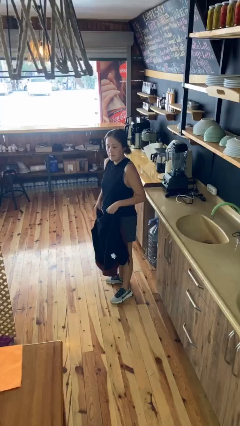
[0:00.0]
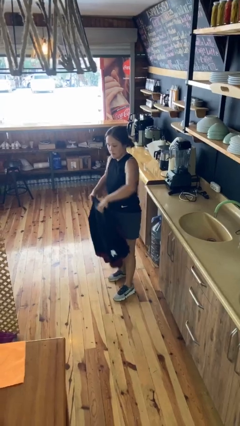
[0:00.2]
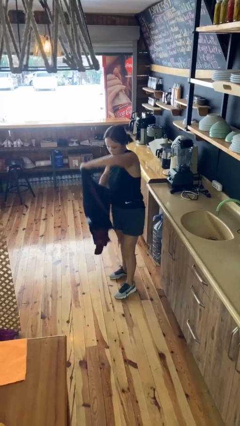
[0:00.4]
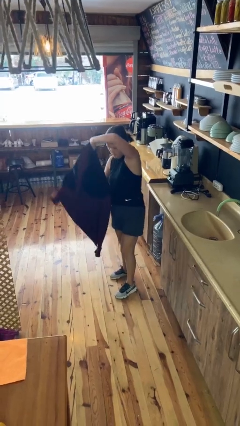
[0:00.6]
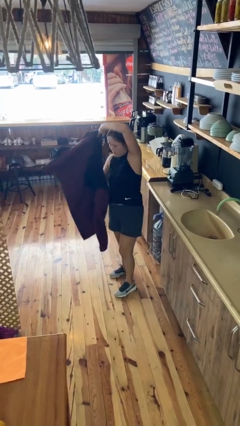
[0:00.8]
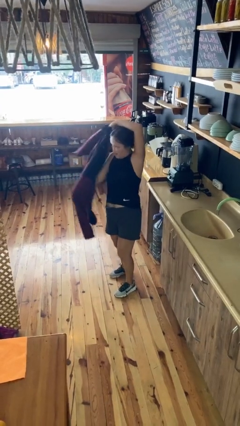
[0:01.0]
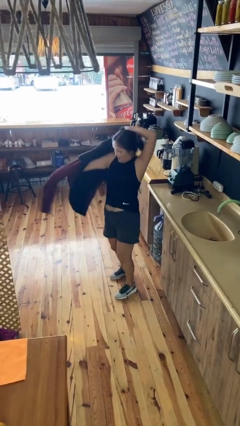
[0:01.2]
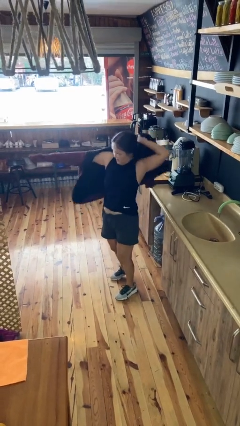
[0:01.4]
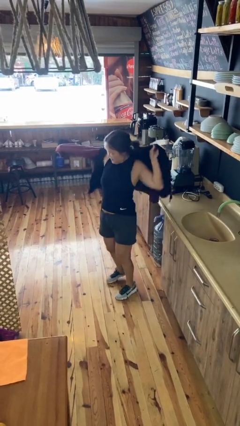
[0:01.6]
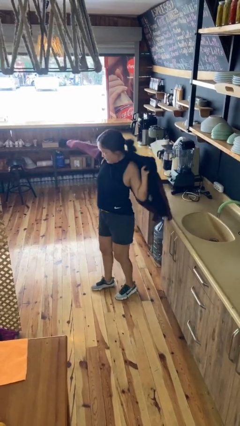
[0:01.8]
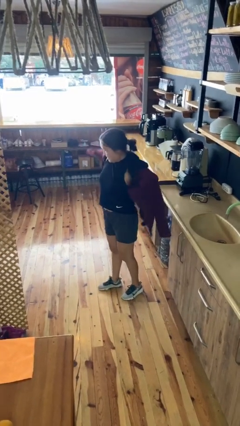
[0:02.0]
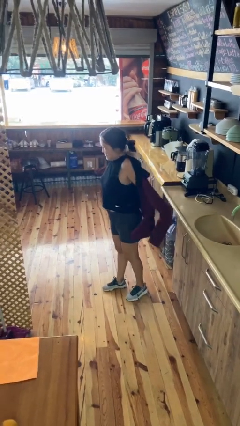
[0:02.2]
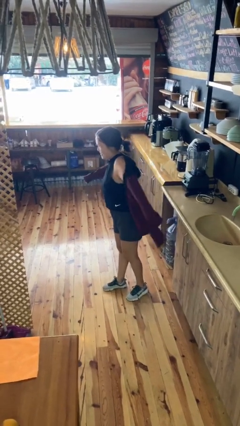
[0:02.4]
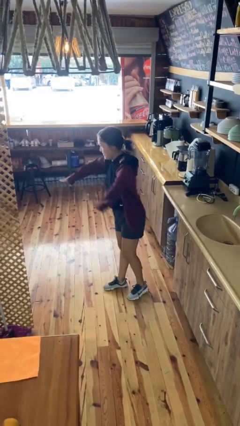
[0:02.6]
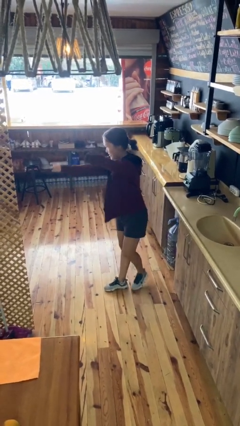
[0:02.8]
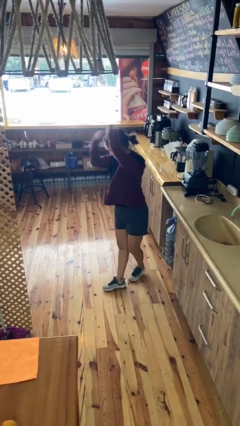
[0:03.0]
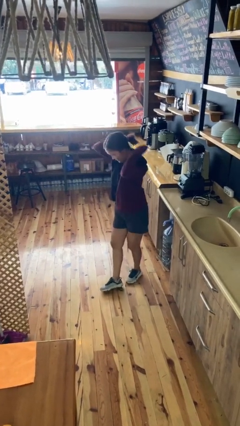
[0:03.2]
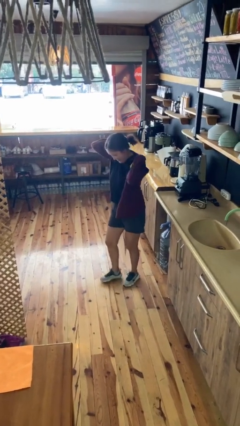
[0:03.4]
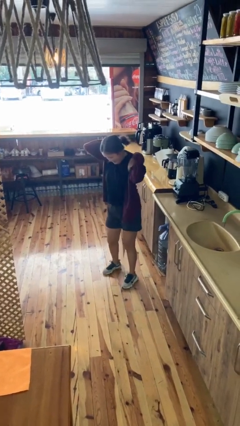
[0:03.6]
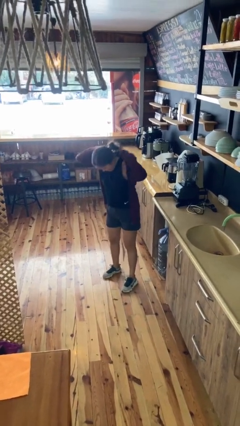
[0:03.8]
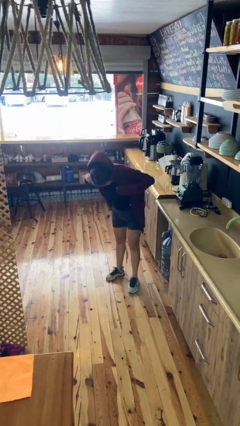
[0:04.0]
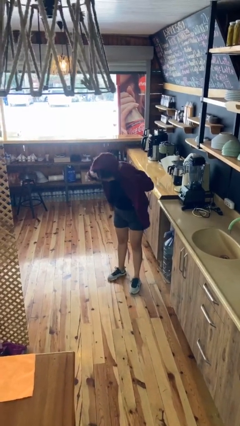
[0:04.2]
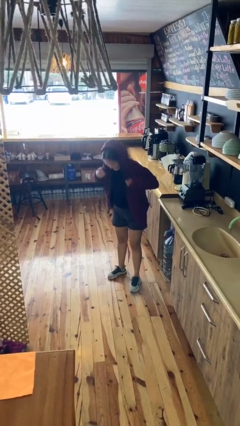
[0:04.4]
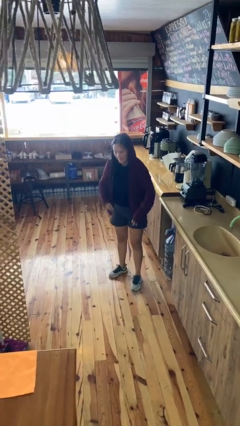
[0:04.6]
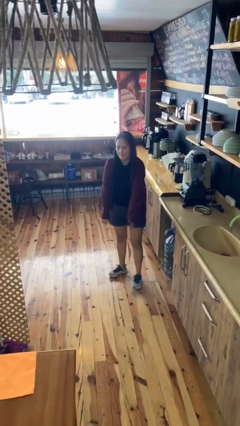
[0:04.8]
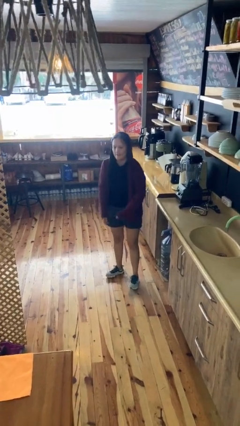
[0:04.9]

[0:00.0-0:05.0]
person puts on hoodie

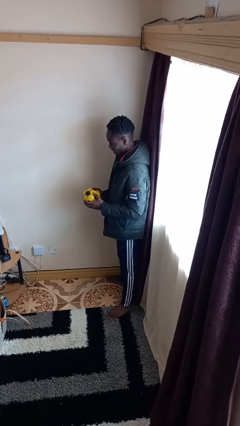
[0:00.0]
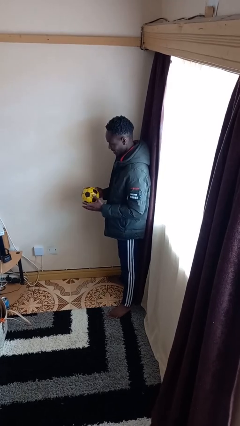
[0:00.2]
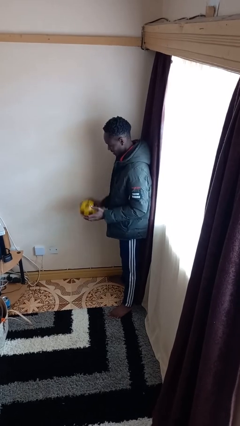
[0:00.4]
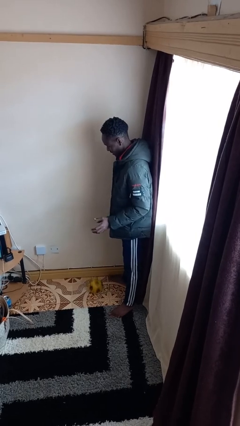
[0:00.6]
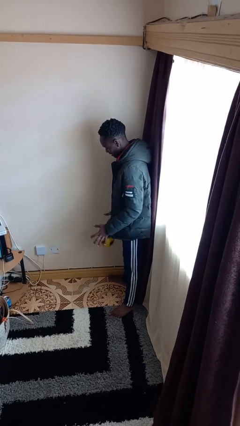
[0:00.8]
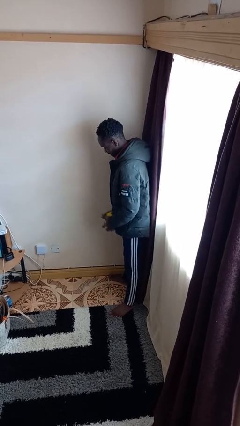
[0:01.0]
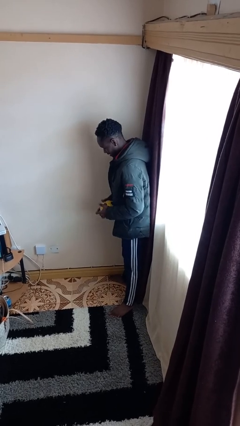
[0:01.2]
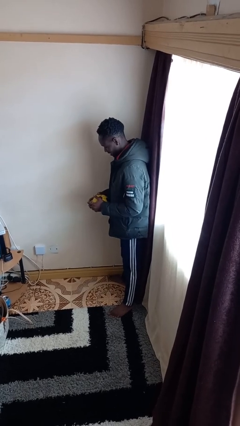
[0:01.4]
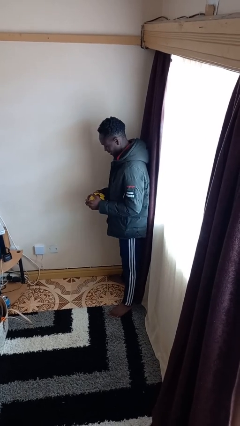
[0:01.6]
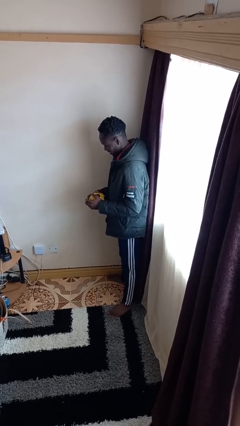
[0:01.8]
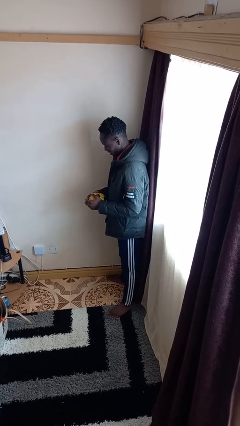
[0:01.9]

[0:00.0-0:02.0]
person bounces ball on floor

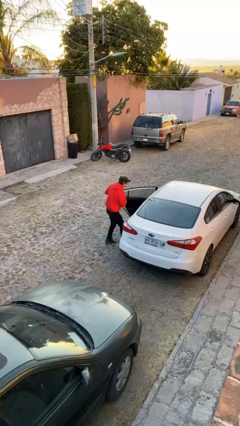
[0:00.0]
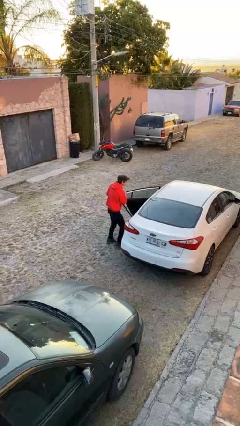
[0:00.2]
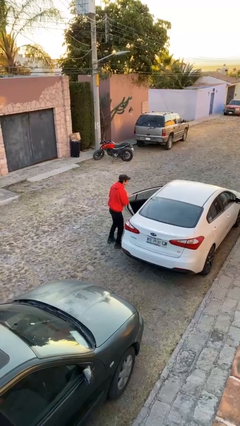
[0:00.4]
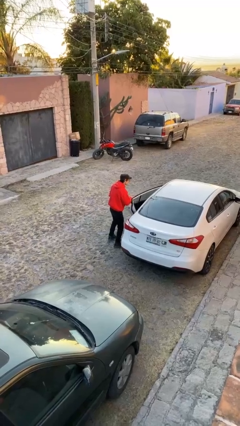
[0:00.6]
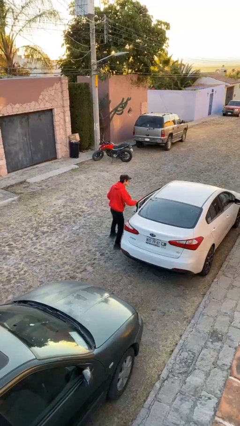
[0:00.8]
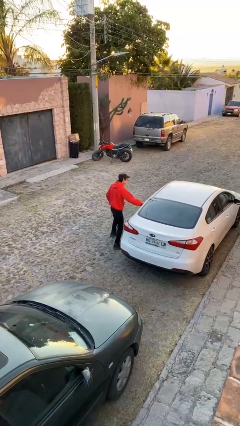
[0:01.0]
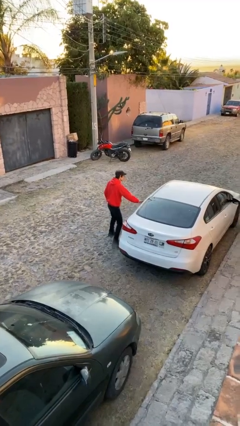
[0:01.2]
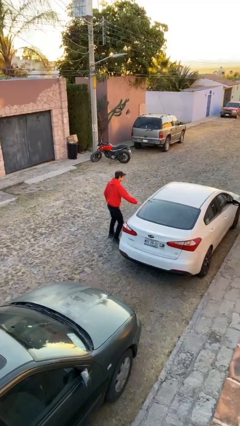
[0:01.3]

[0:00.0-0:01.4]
person closes facility door

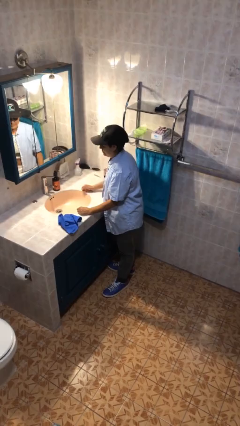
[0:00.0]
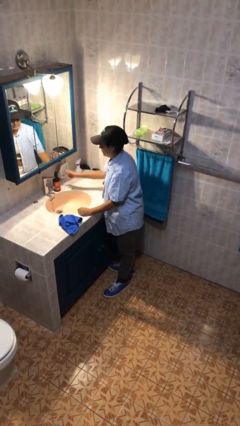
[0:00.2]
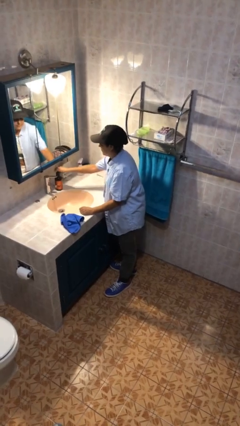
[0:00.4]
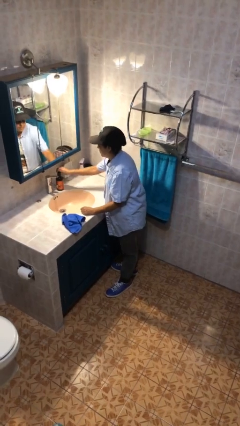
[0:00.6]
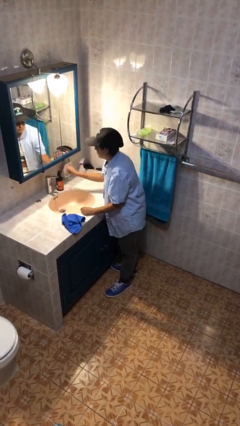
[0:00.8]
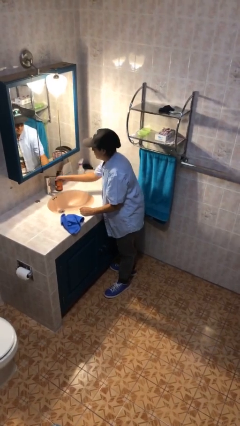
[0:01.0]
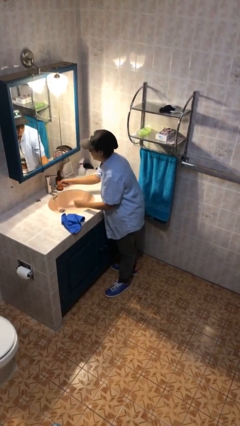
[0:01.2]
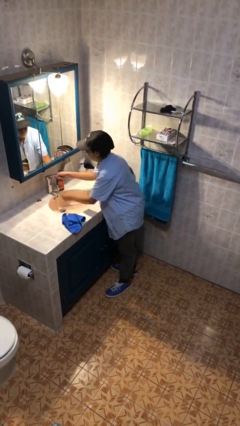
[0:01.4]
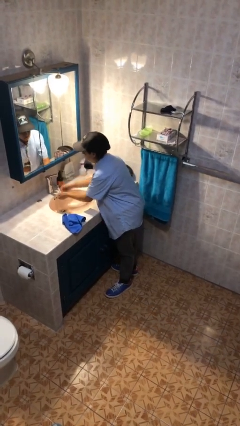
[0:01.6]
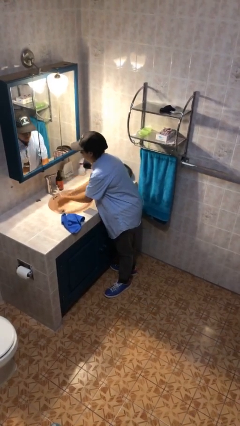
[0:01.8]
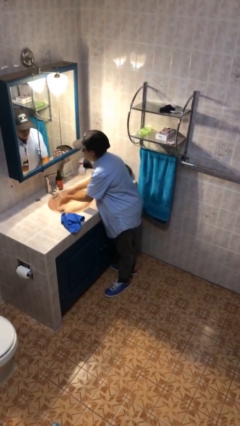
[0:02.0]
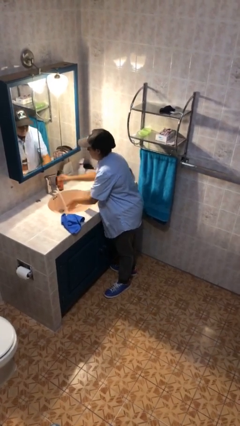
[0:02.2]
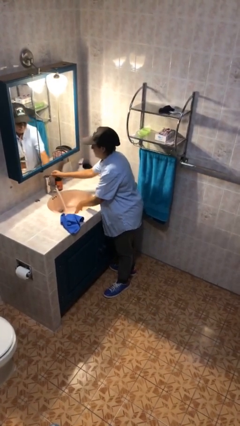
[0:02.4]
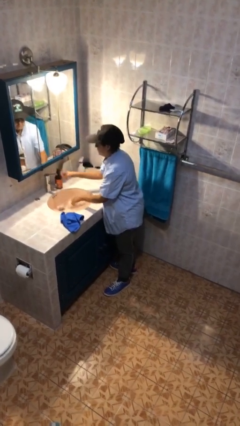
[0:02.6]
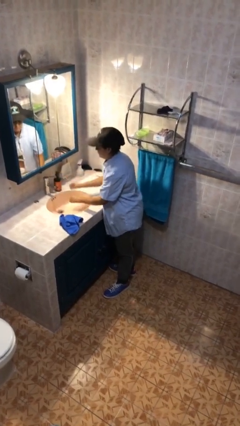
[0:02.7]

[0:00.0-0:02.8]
person washes hands

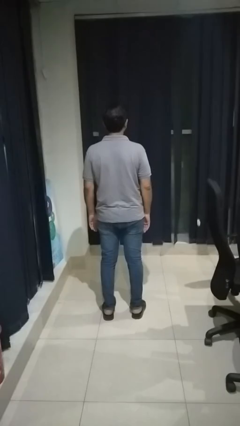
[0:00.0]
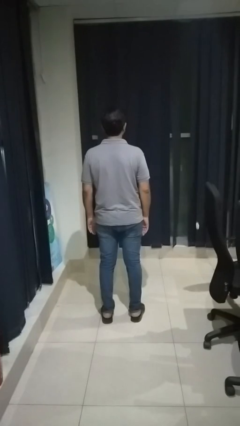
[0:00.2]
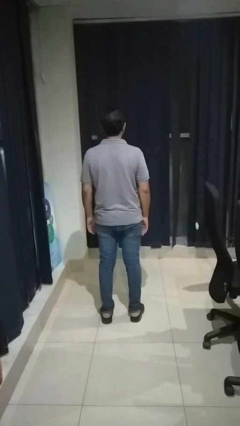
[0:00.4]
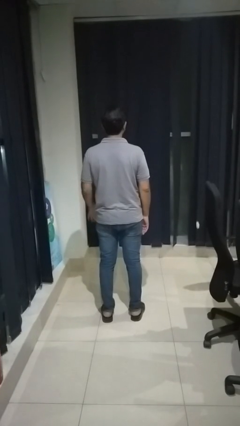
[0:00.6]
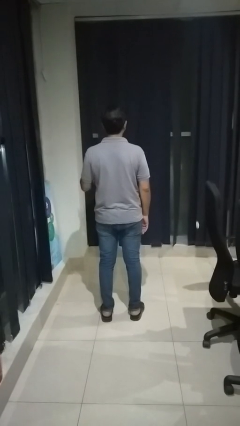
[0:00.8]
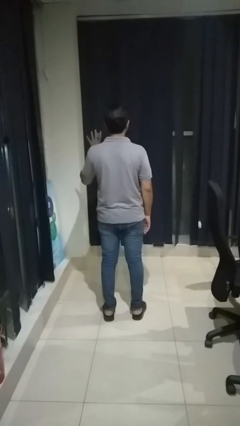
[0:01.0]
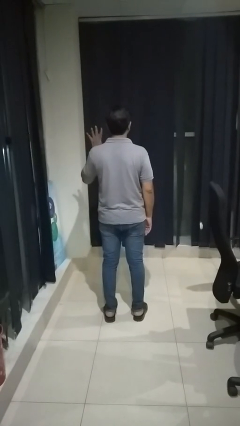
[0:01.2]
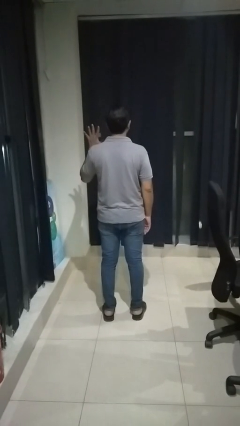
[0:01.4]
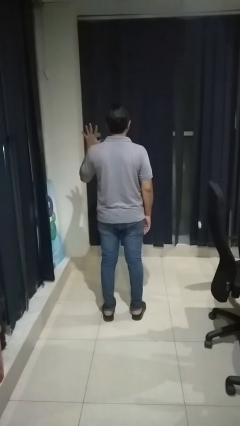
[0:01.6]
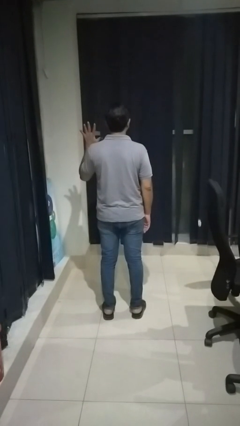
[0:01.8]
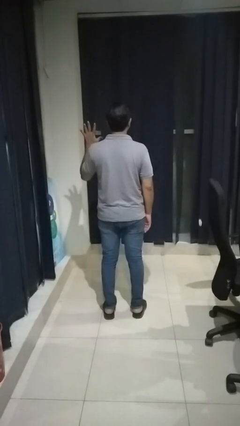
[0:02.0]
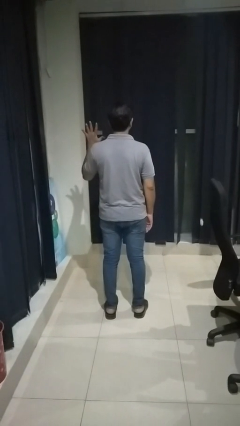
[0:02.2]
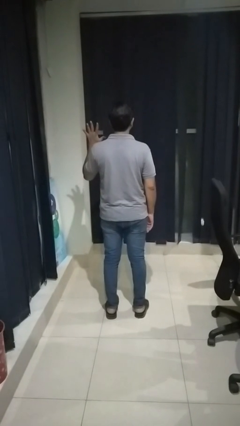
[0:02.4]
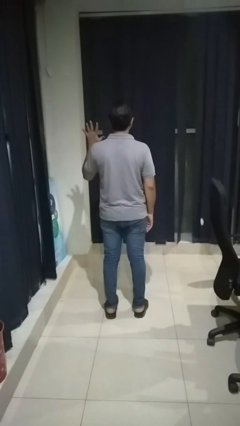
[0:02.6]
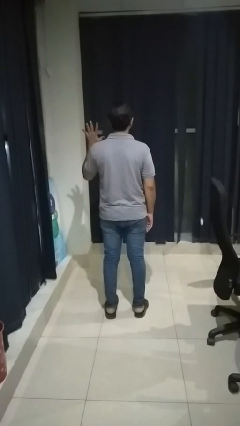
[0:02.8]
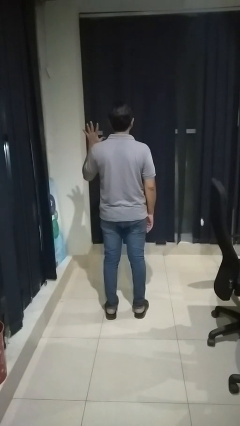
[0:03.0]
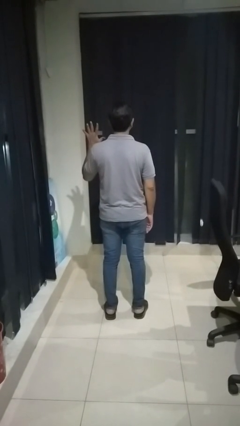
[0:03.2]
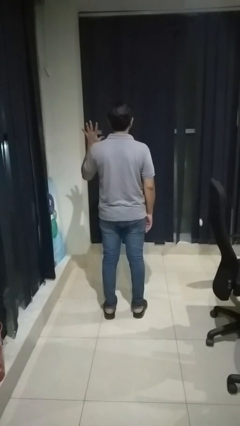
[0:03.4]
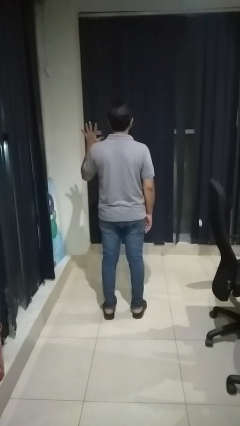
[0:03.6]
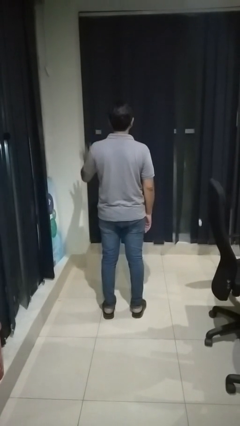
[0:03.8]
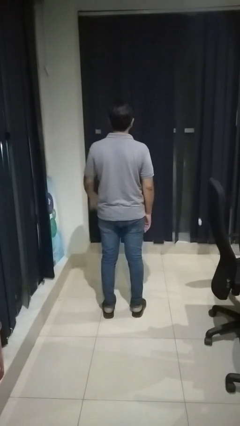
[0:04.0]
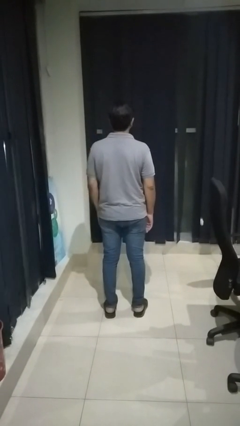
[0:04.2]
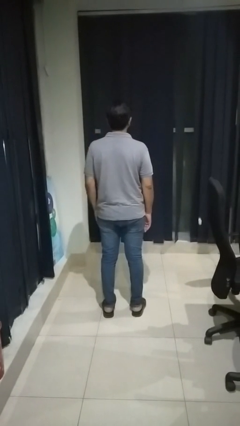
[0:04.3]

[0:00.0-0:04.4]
person gestures number five

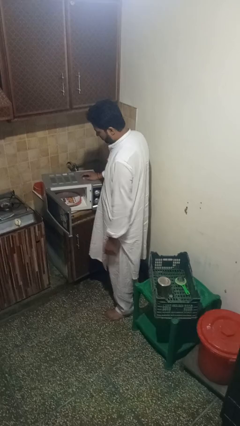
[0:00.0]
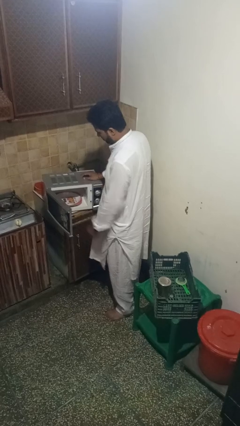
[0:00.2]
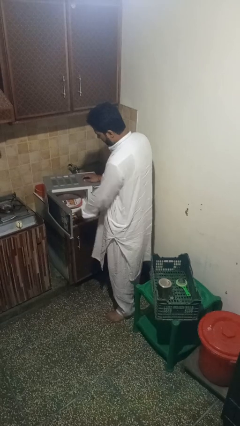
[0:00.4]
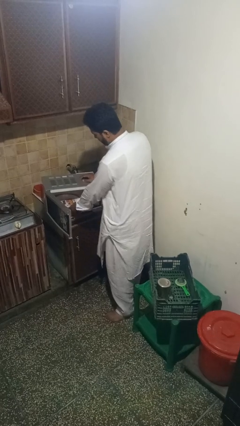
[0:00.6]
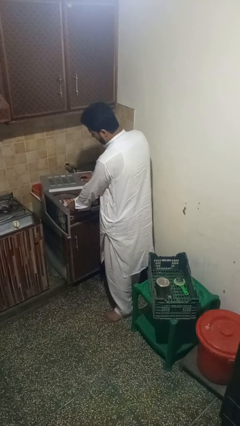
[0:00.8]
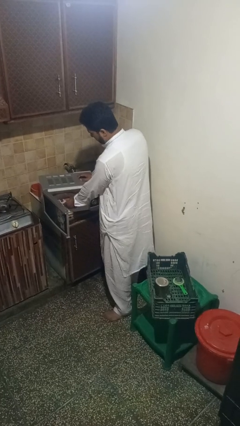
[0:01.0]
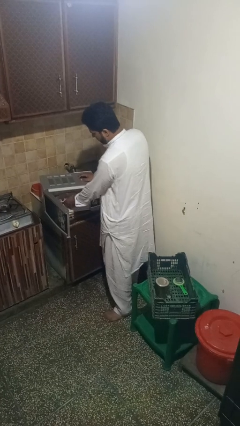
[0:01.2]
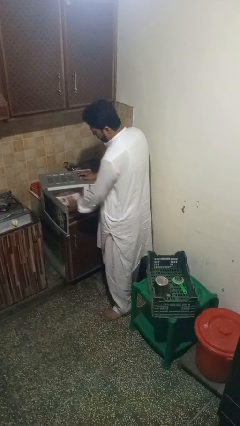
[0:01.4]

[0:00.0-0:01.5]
person takes object from microwave

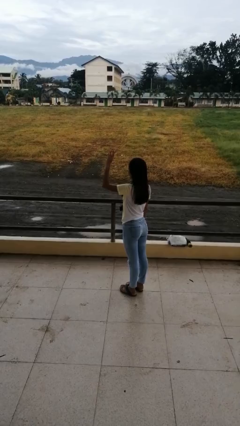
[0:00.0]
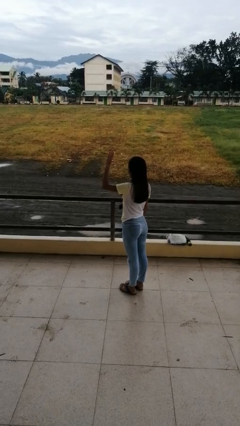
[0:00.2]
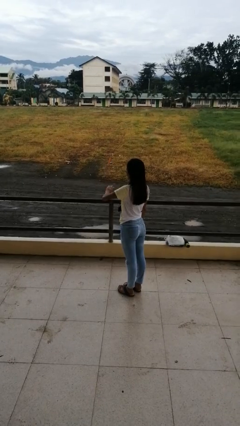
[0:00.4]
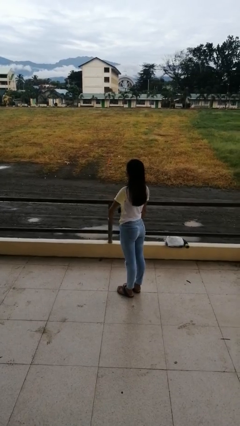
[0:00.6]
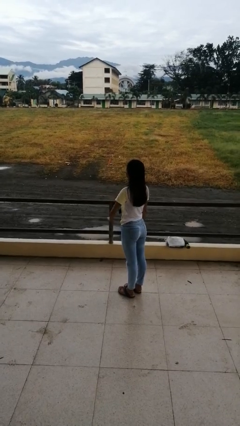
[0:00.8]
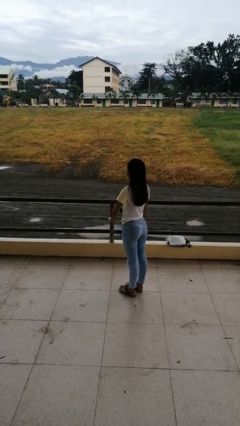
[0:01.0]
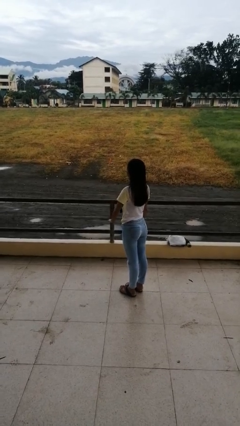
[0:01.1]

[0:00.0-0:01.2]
person gestures swipe down
